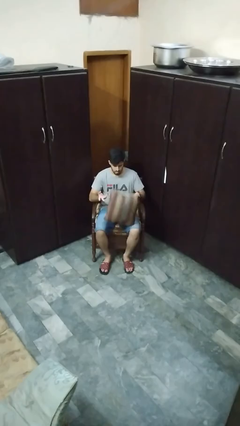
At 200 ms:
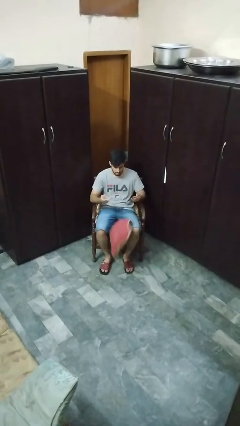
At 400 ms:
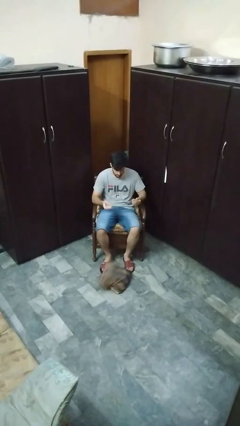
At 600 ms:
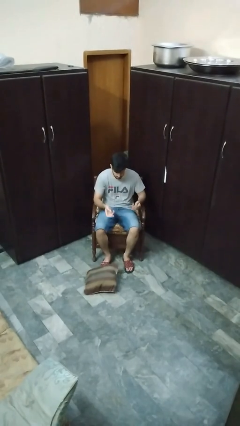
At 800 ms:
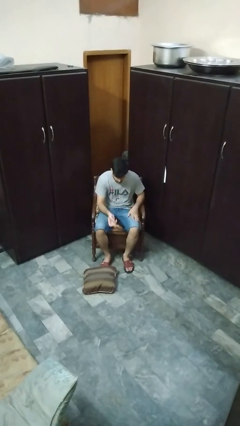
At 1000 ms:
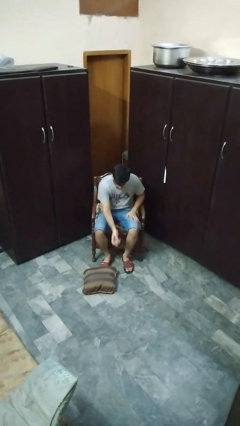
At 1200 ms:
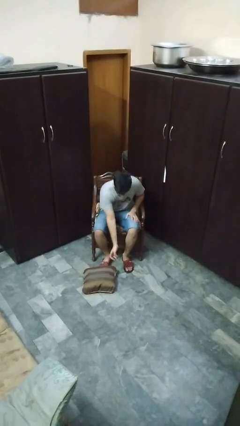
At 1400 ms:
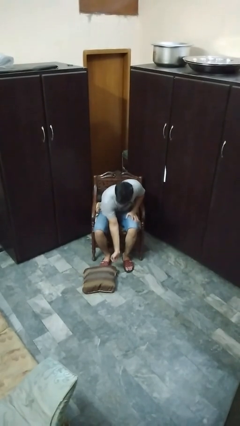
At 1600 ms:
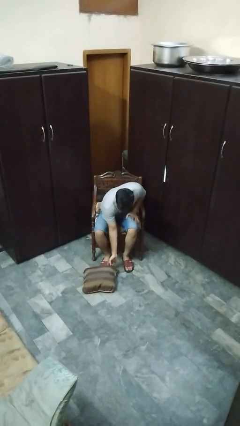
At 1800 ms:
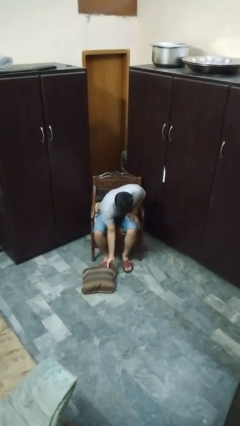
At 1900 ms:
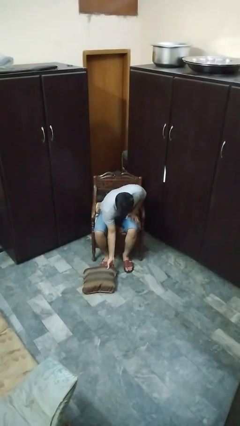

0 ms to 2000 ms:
person drops object

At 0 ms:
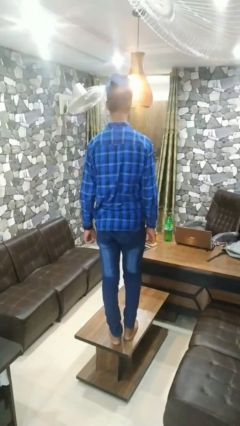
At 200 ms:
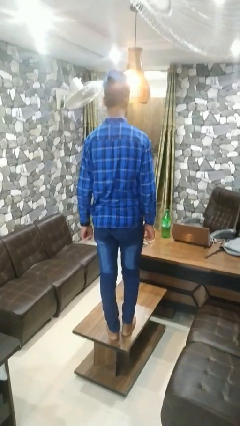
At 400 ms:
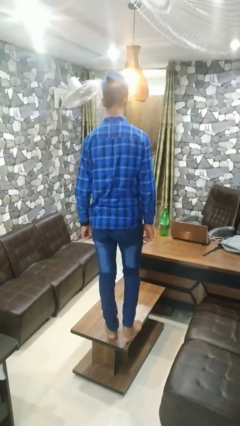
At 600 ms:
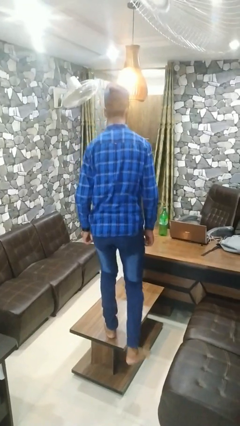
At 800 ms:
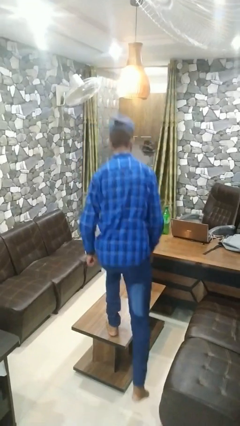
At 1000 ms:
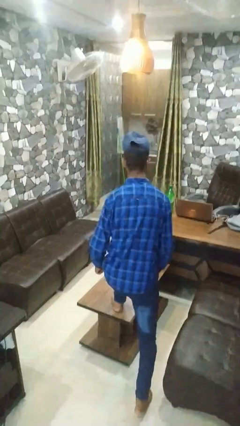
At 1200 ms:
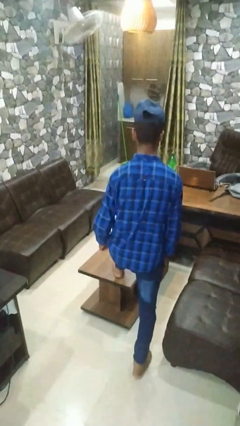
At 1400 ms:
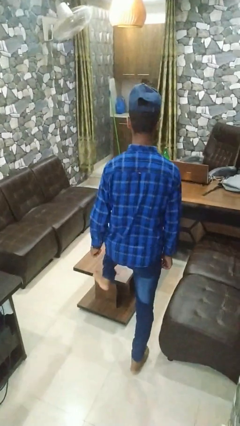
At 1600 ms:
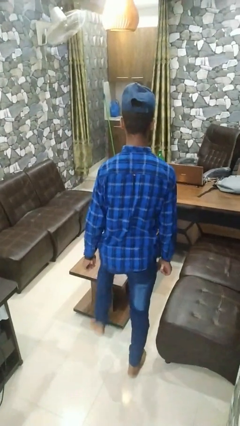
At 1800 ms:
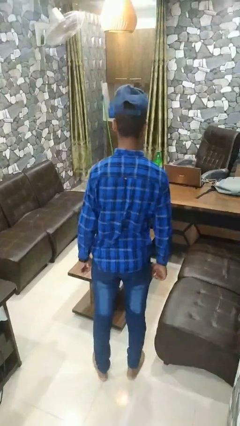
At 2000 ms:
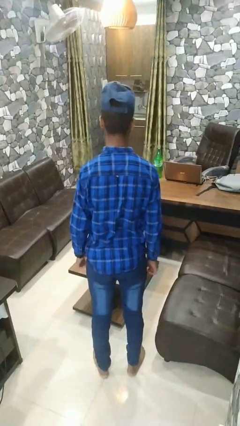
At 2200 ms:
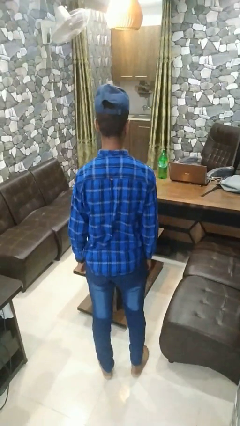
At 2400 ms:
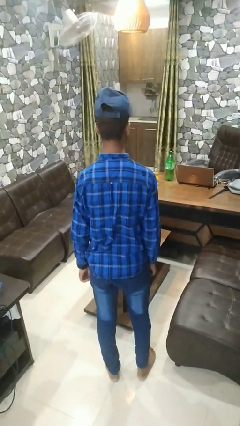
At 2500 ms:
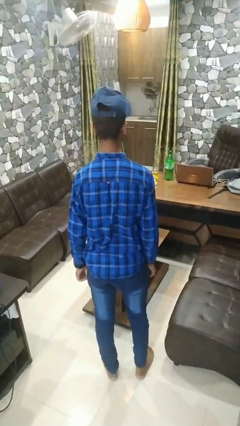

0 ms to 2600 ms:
person climbs off table

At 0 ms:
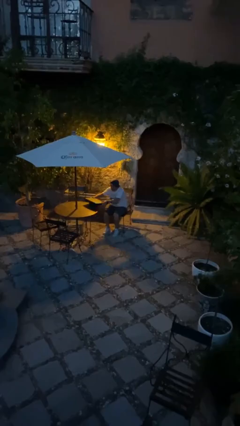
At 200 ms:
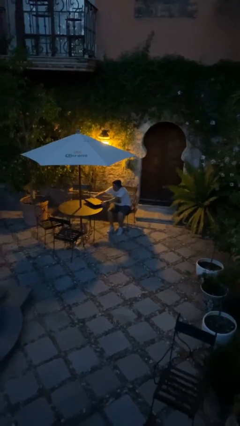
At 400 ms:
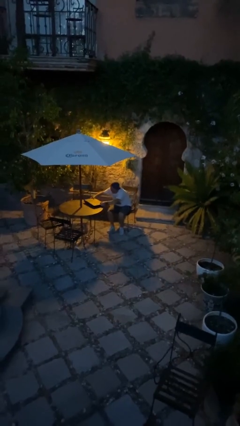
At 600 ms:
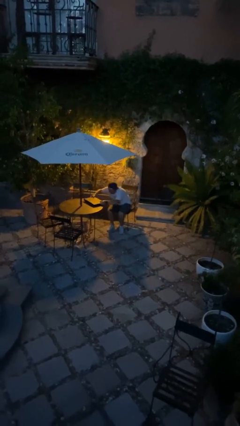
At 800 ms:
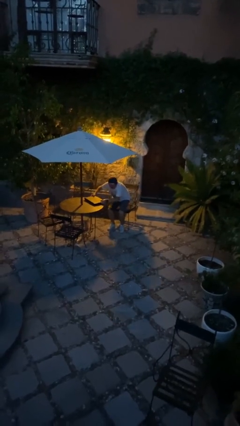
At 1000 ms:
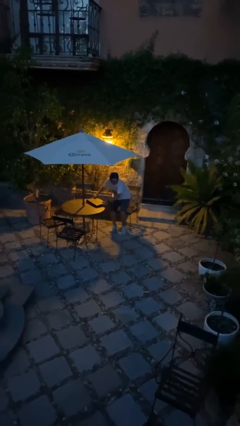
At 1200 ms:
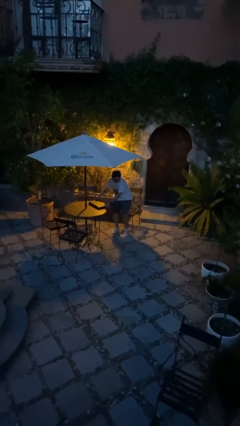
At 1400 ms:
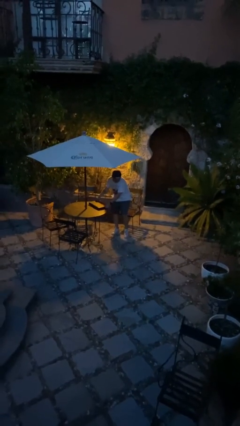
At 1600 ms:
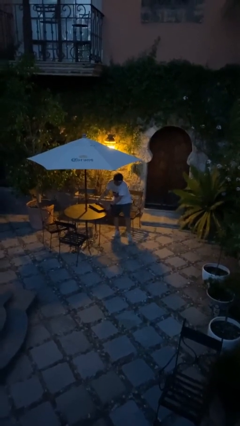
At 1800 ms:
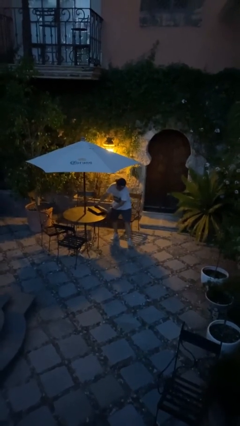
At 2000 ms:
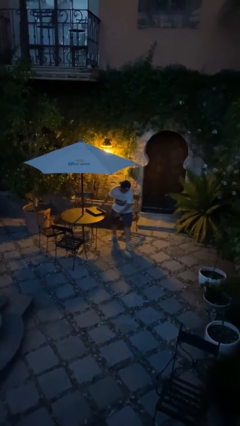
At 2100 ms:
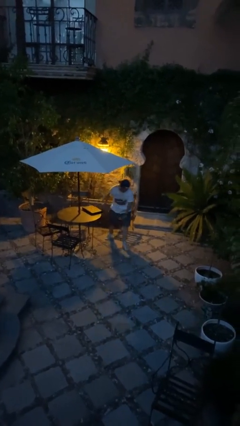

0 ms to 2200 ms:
person stands up

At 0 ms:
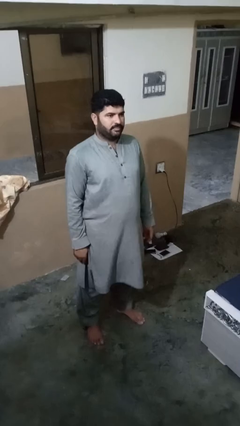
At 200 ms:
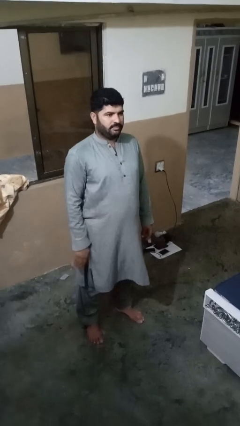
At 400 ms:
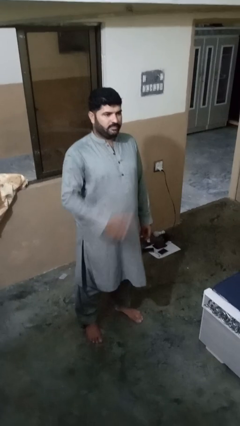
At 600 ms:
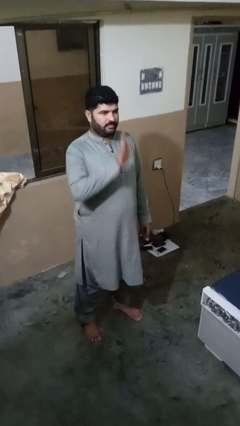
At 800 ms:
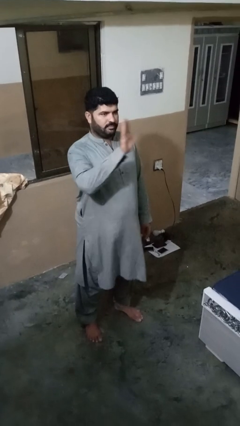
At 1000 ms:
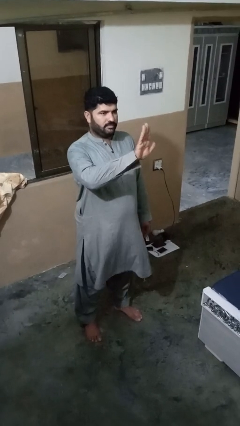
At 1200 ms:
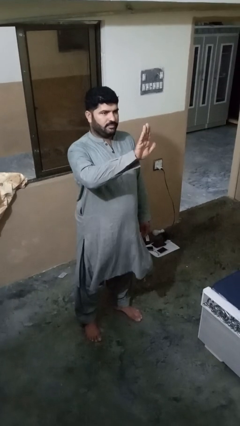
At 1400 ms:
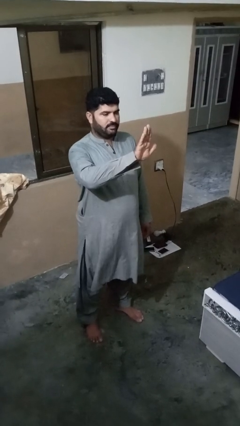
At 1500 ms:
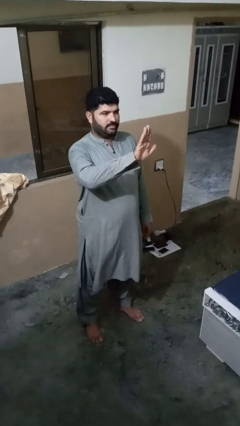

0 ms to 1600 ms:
person gestures stop

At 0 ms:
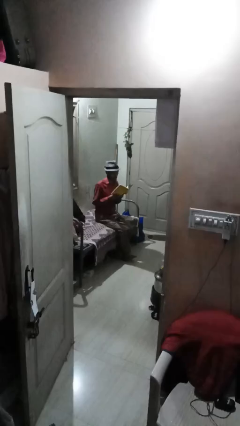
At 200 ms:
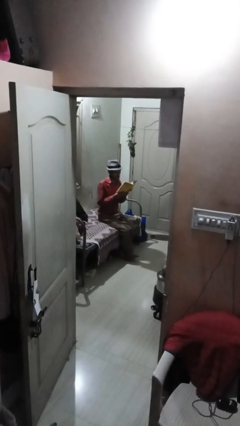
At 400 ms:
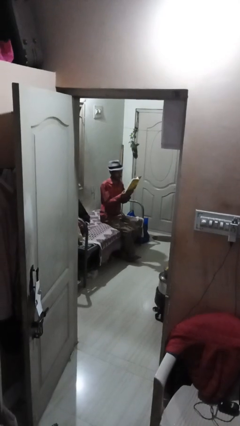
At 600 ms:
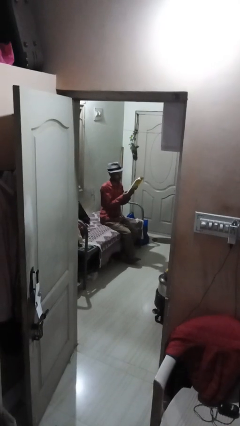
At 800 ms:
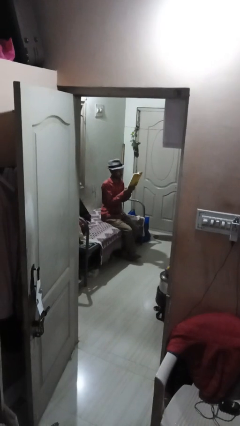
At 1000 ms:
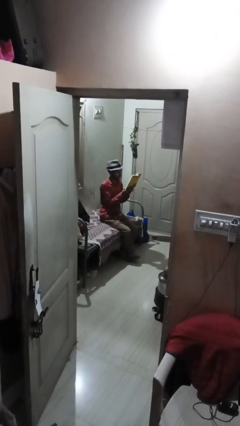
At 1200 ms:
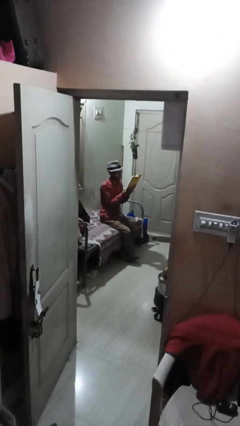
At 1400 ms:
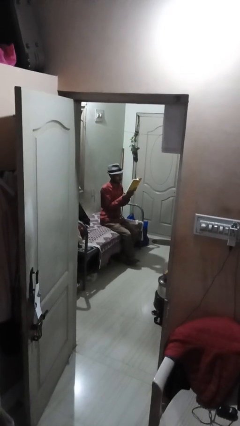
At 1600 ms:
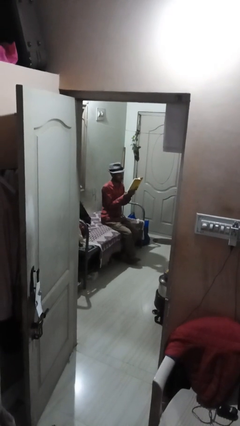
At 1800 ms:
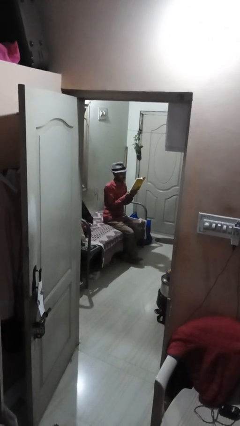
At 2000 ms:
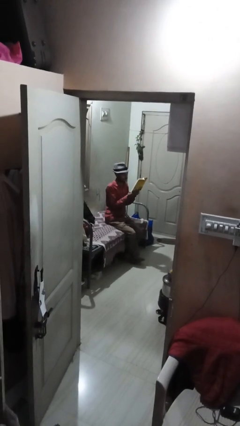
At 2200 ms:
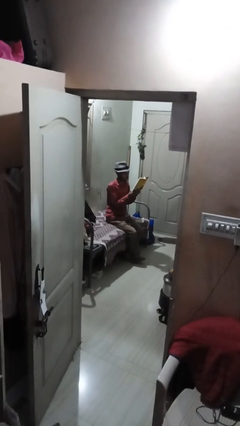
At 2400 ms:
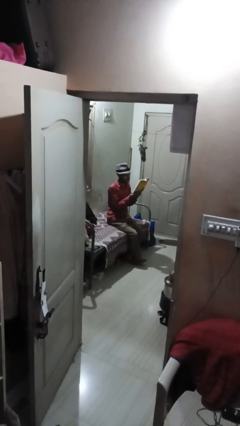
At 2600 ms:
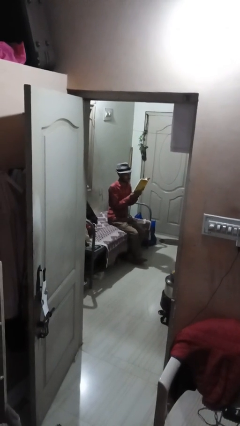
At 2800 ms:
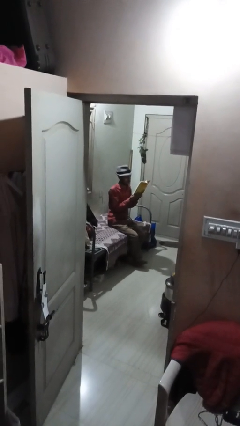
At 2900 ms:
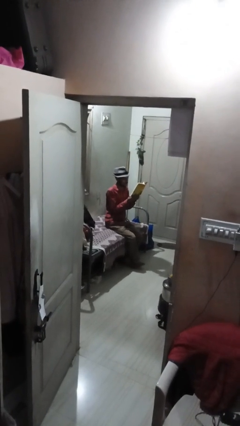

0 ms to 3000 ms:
person reads book

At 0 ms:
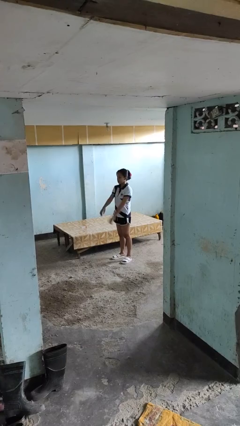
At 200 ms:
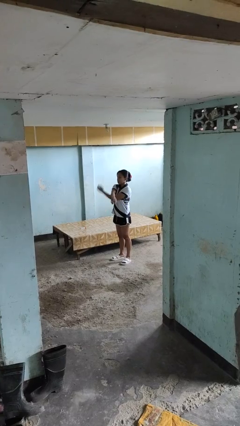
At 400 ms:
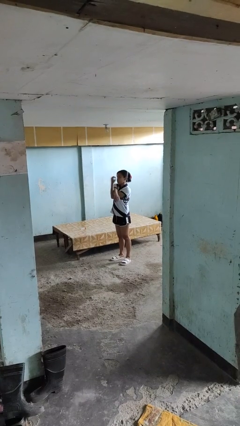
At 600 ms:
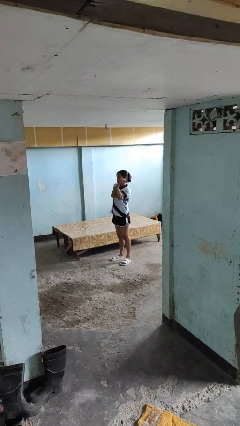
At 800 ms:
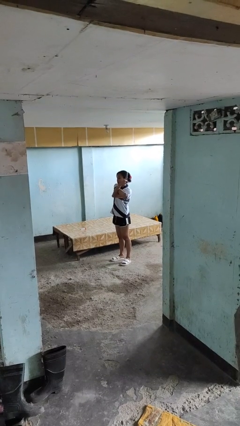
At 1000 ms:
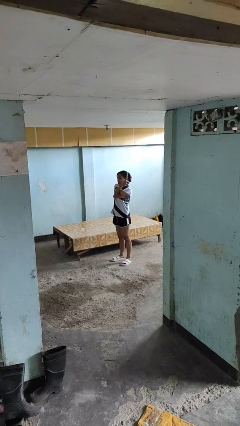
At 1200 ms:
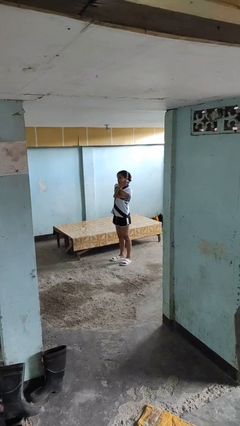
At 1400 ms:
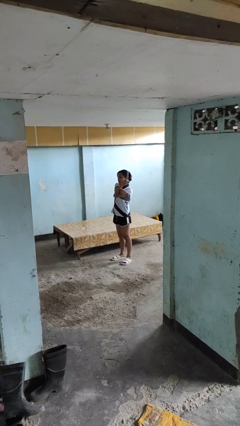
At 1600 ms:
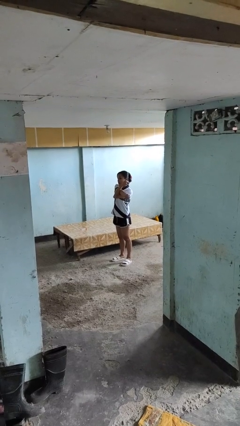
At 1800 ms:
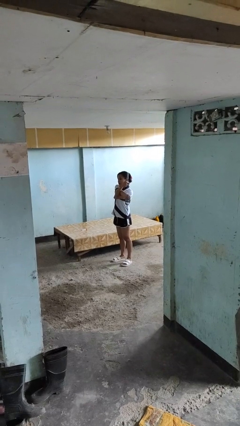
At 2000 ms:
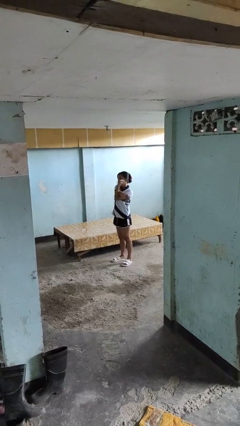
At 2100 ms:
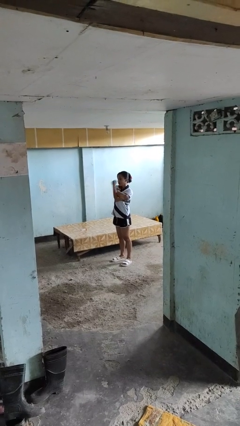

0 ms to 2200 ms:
person crosses arms

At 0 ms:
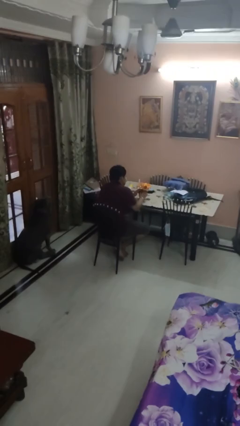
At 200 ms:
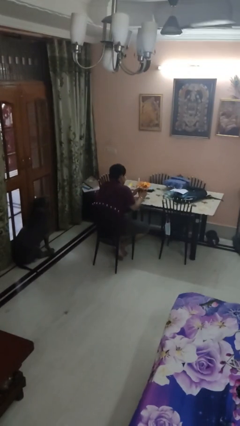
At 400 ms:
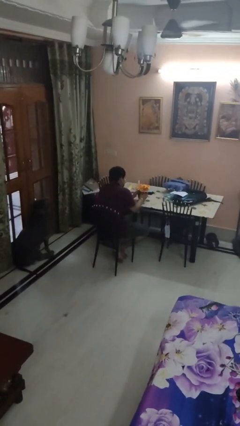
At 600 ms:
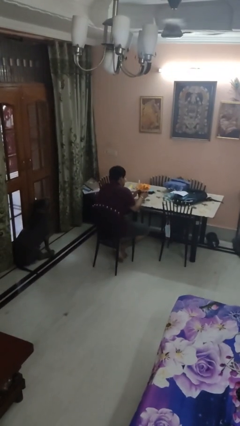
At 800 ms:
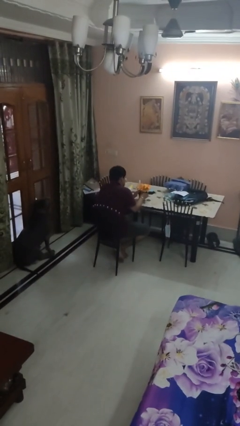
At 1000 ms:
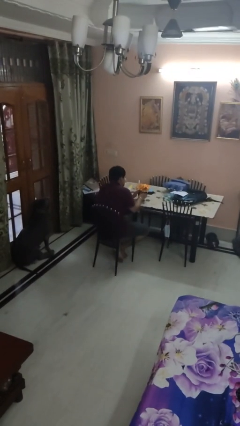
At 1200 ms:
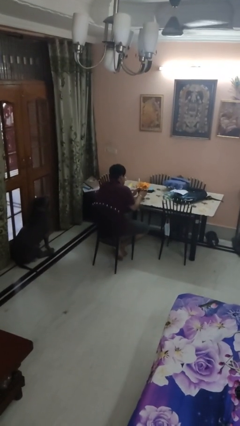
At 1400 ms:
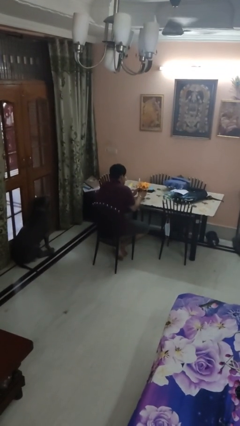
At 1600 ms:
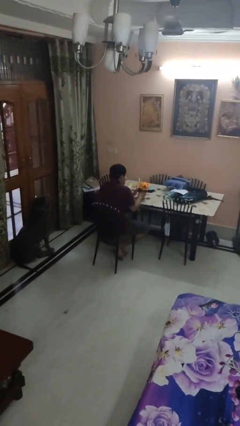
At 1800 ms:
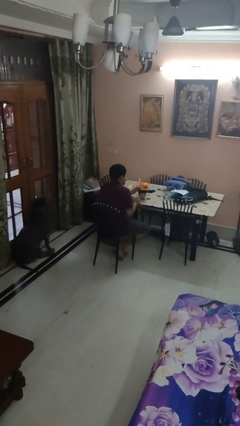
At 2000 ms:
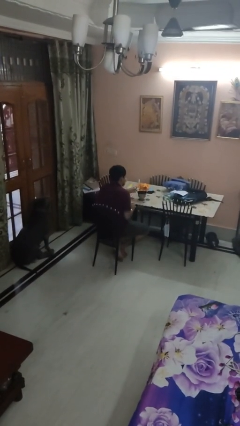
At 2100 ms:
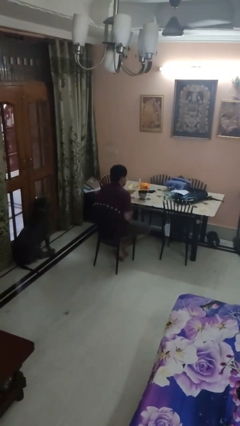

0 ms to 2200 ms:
person arranges flowers in vase

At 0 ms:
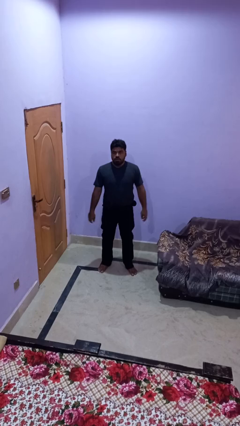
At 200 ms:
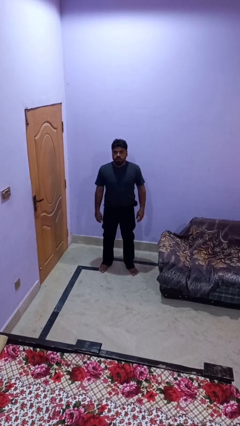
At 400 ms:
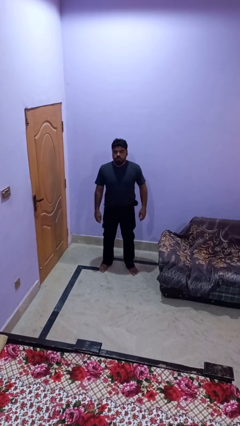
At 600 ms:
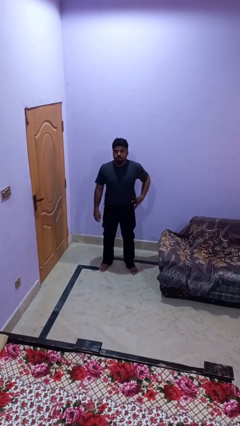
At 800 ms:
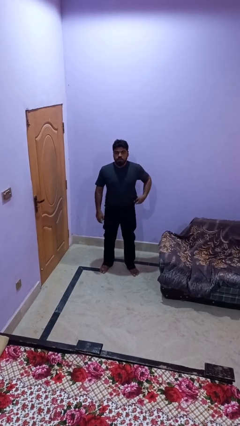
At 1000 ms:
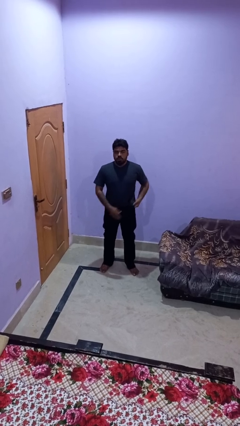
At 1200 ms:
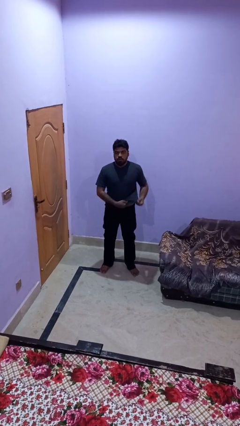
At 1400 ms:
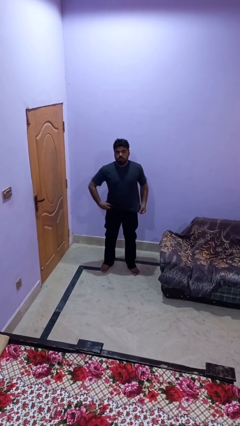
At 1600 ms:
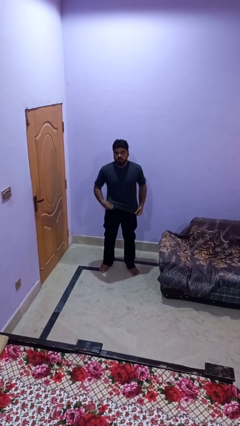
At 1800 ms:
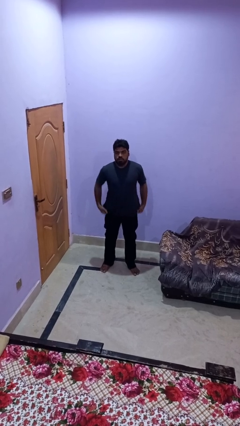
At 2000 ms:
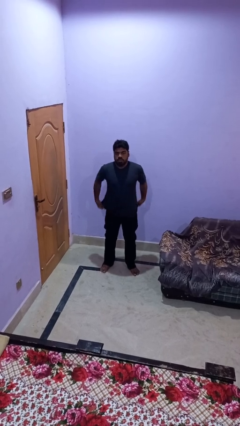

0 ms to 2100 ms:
person untucks shirt
